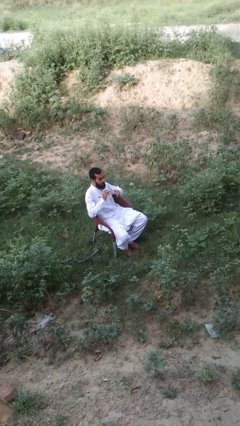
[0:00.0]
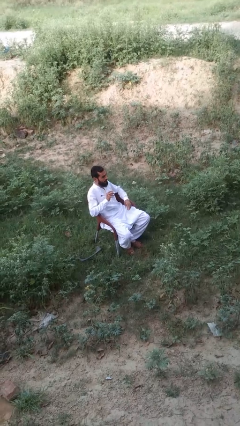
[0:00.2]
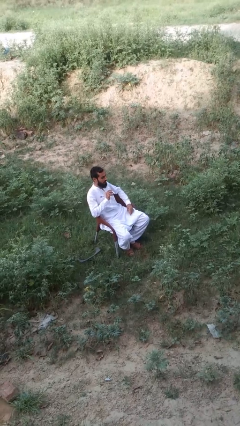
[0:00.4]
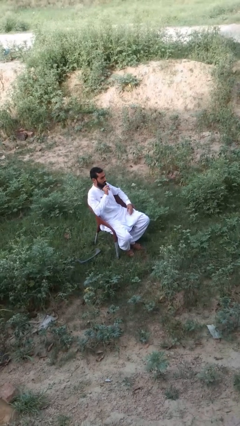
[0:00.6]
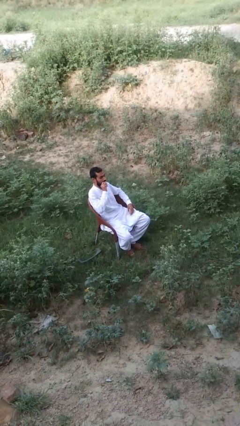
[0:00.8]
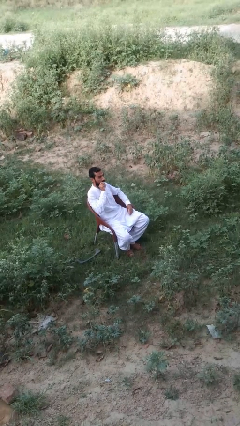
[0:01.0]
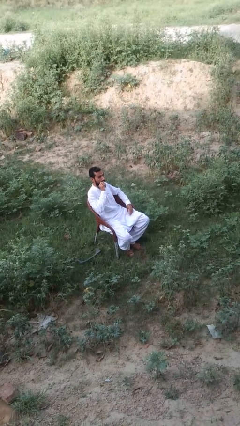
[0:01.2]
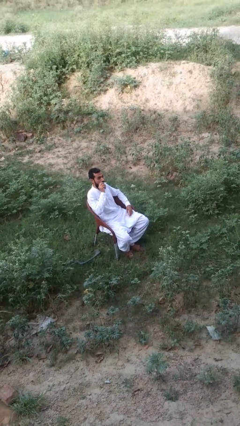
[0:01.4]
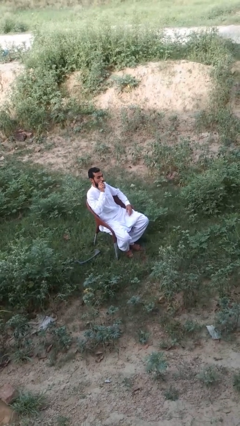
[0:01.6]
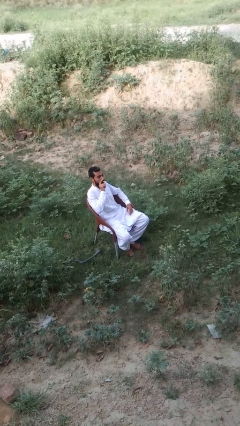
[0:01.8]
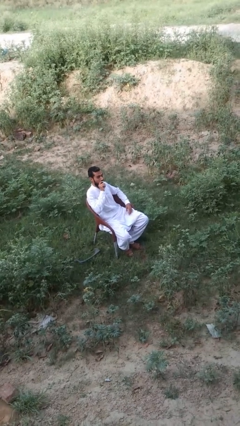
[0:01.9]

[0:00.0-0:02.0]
person vapes

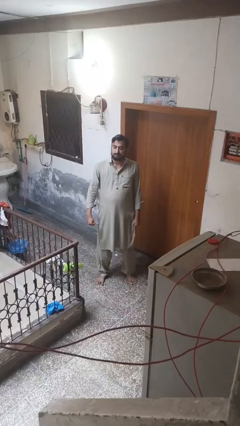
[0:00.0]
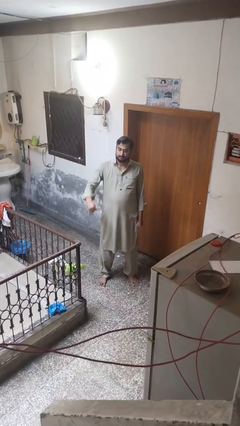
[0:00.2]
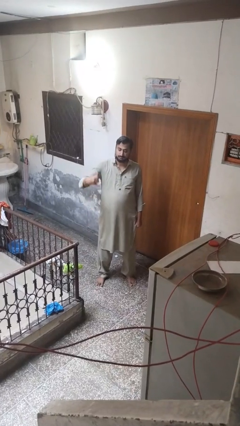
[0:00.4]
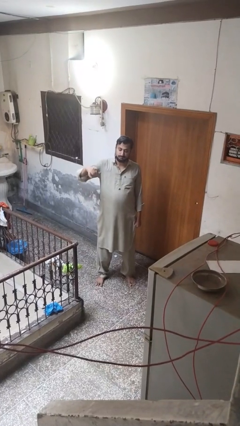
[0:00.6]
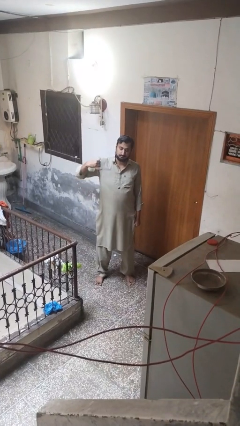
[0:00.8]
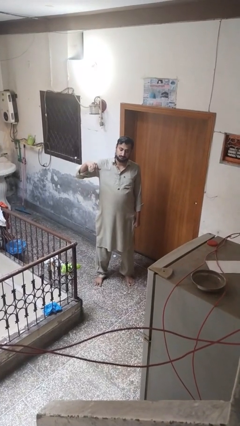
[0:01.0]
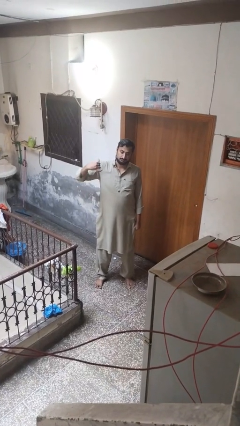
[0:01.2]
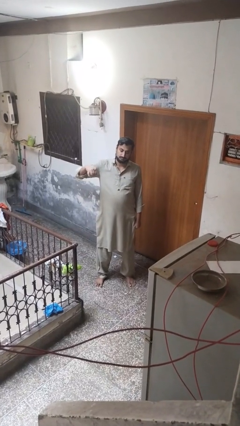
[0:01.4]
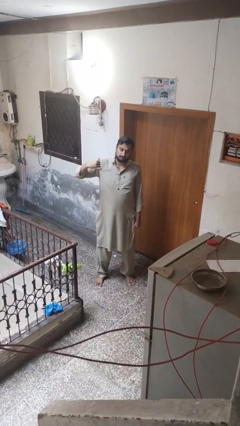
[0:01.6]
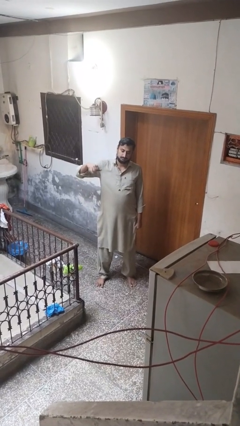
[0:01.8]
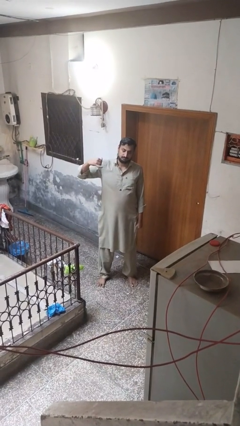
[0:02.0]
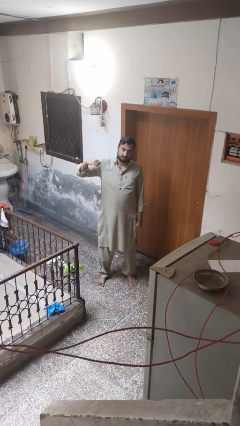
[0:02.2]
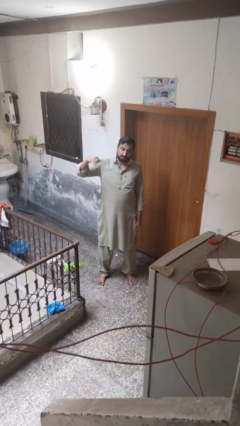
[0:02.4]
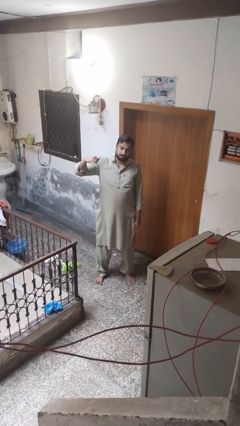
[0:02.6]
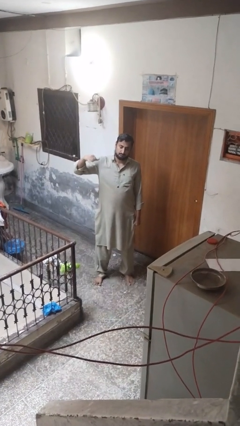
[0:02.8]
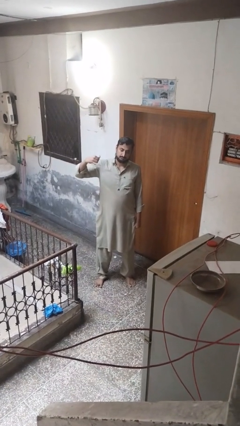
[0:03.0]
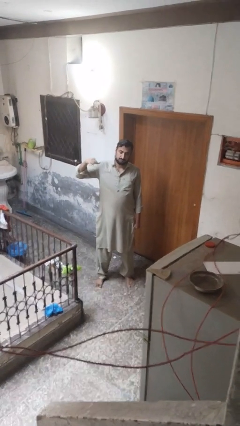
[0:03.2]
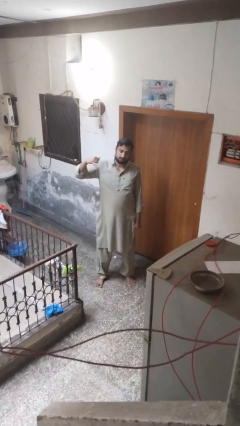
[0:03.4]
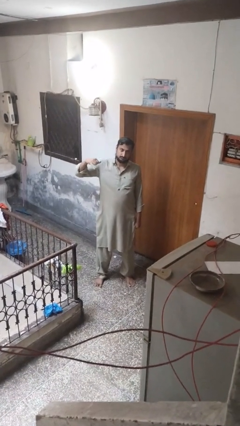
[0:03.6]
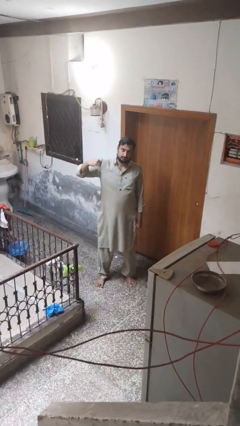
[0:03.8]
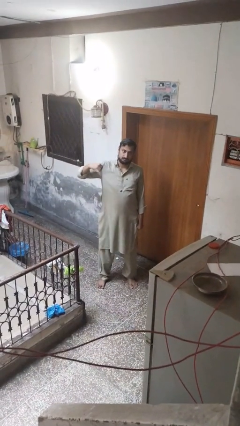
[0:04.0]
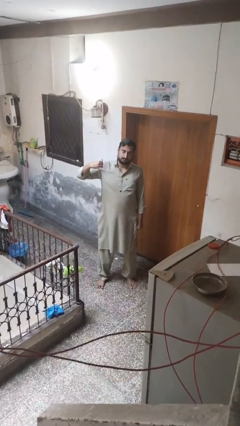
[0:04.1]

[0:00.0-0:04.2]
person gestures hang loose

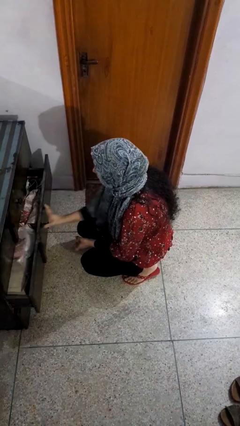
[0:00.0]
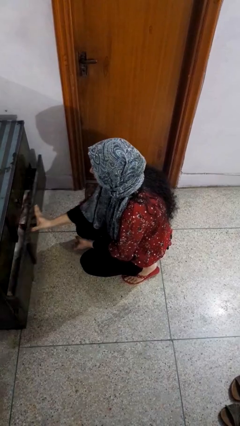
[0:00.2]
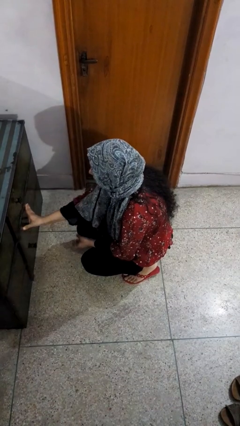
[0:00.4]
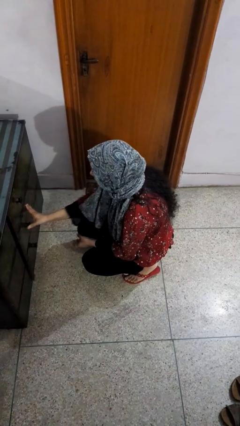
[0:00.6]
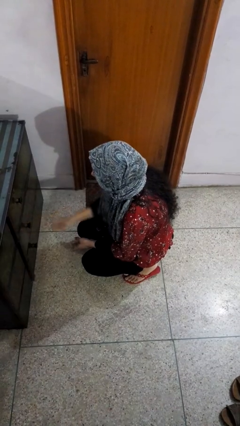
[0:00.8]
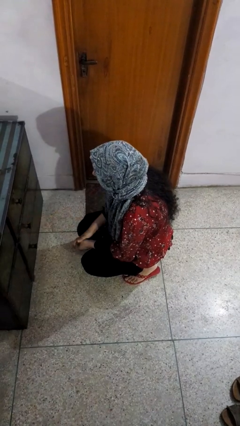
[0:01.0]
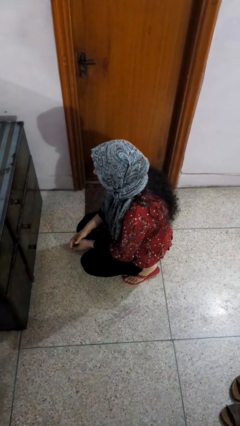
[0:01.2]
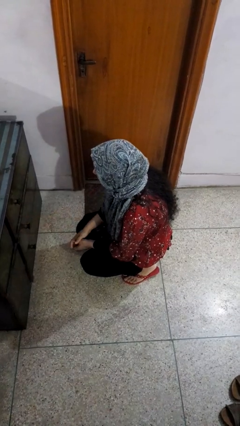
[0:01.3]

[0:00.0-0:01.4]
person closes dresser drawer

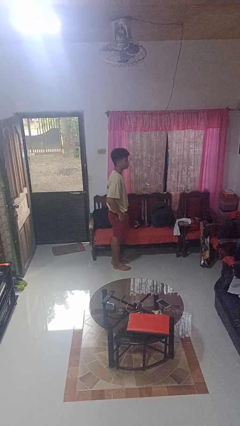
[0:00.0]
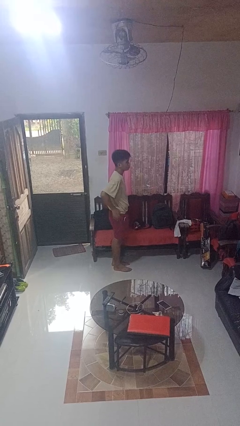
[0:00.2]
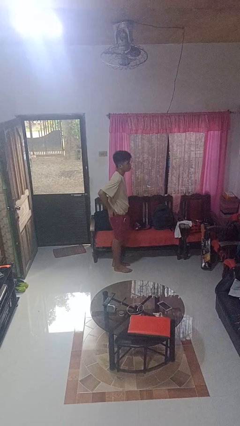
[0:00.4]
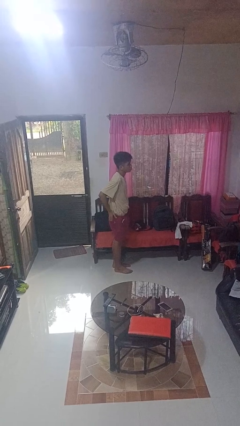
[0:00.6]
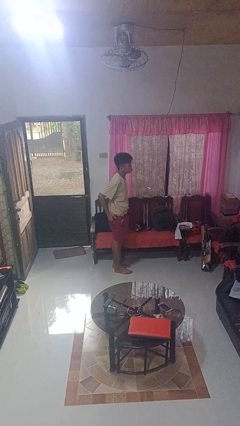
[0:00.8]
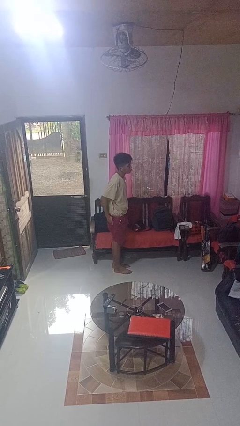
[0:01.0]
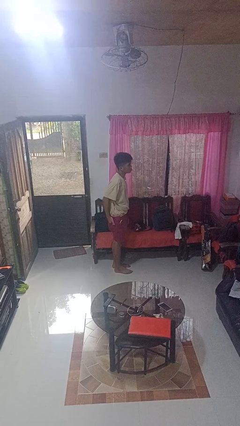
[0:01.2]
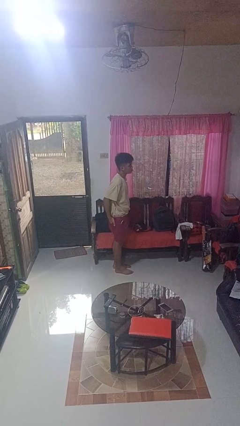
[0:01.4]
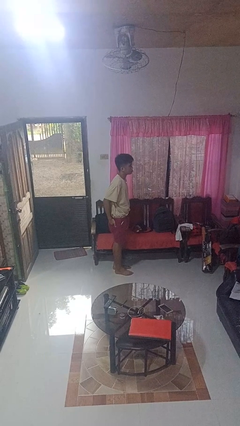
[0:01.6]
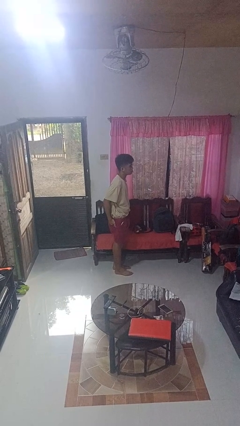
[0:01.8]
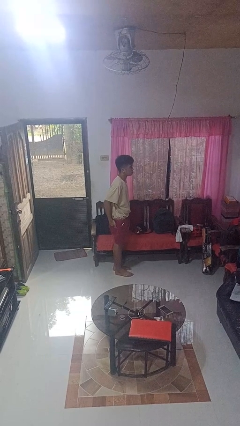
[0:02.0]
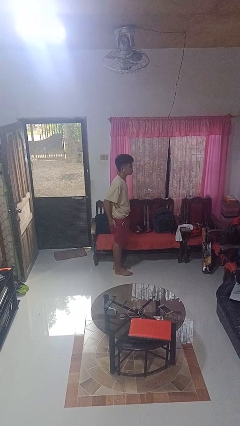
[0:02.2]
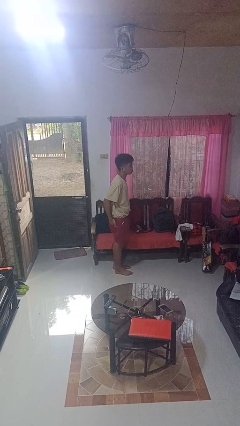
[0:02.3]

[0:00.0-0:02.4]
person puts hands in back pockets

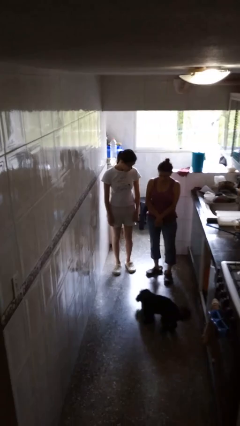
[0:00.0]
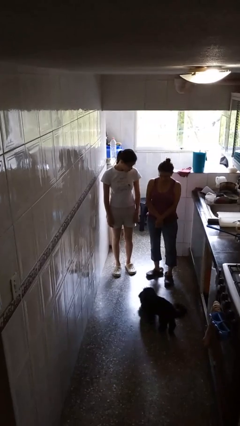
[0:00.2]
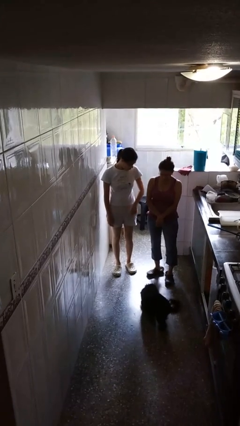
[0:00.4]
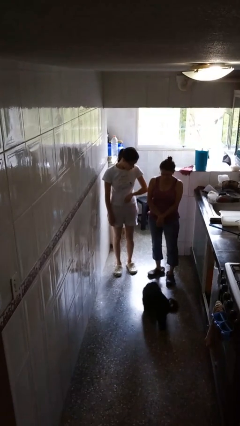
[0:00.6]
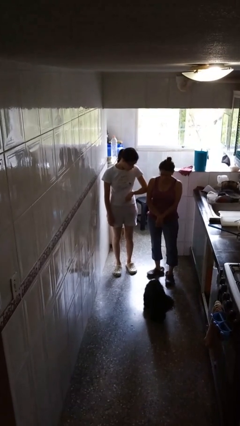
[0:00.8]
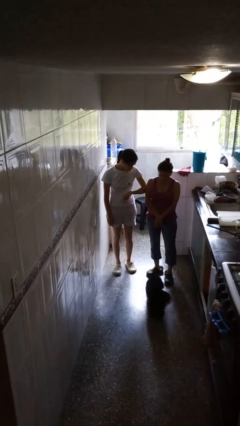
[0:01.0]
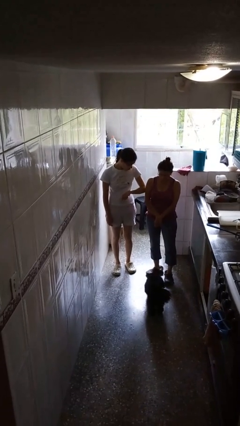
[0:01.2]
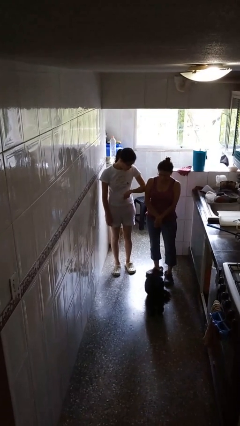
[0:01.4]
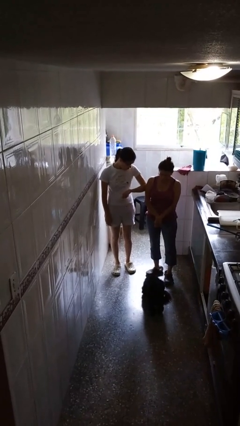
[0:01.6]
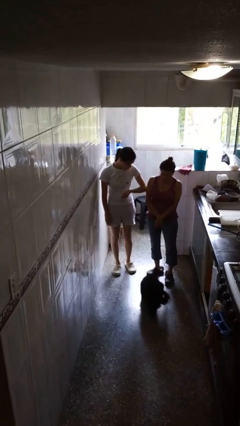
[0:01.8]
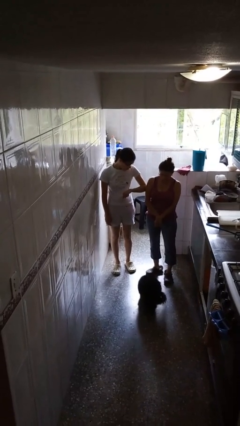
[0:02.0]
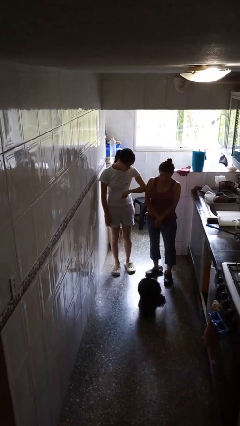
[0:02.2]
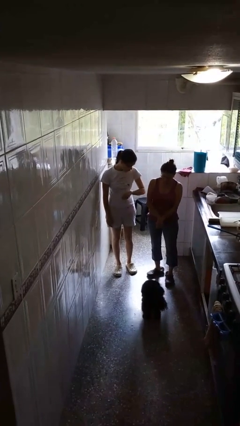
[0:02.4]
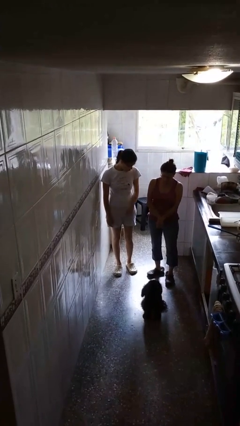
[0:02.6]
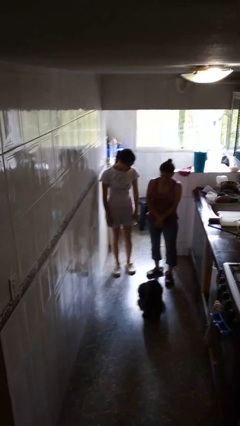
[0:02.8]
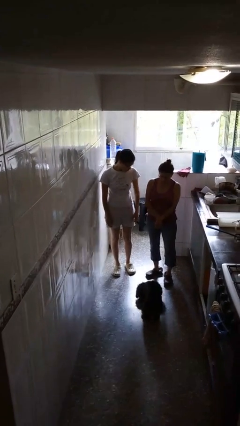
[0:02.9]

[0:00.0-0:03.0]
person nudges person with elbow

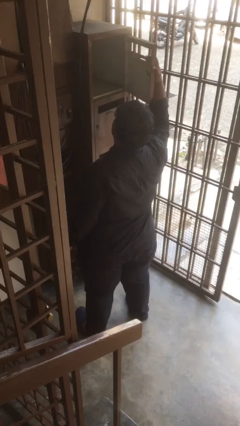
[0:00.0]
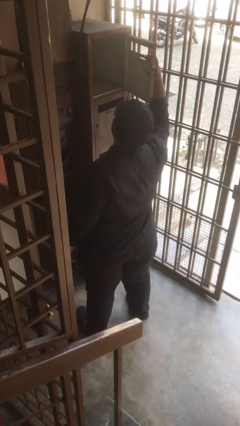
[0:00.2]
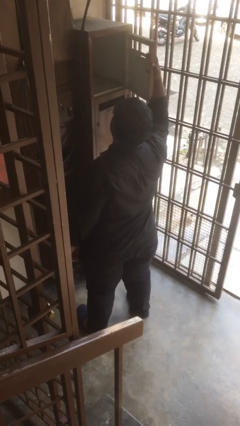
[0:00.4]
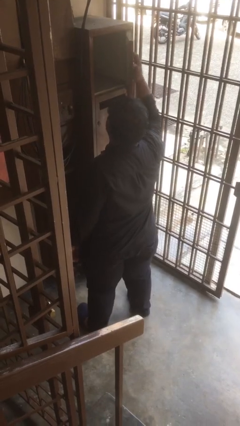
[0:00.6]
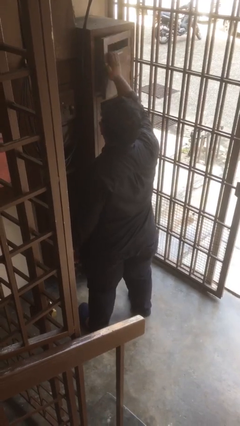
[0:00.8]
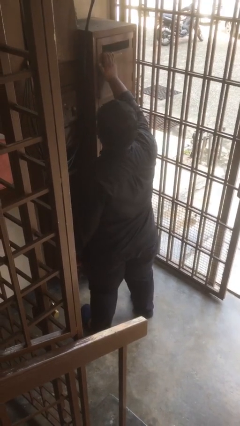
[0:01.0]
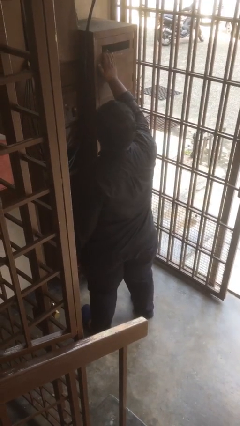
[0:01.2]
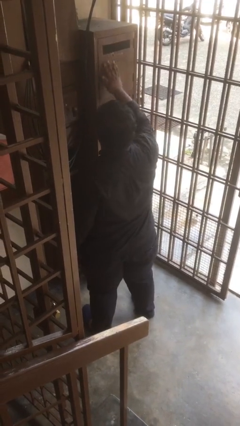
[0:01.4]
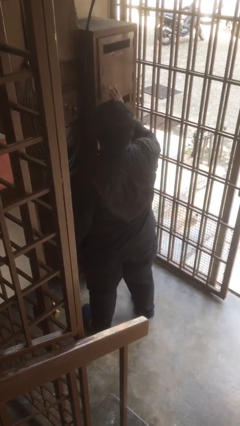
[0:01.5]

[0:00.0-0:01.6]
person closes mailbox

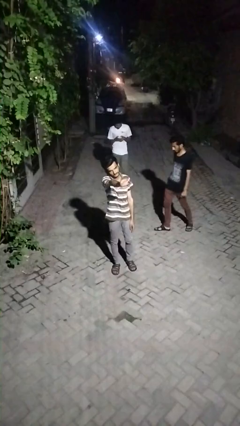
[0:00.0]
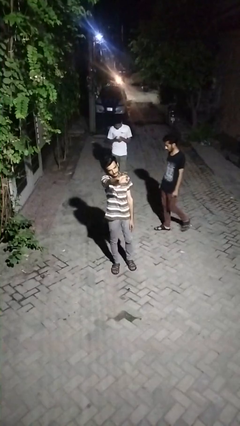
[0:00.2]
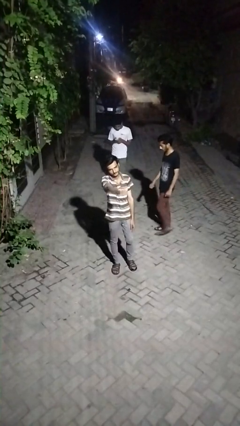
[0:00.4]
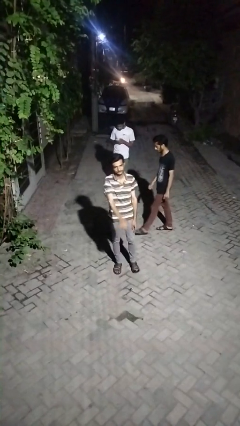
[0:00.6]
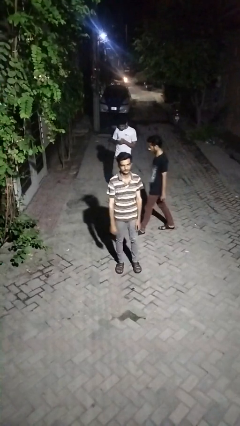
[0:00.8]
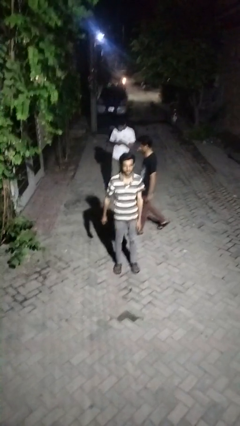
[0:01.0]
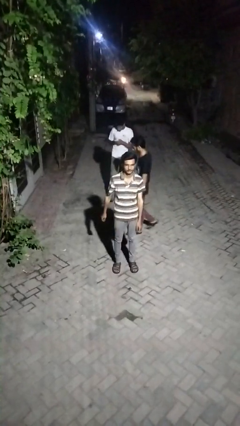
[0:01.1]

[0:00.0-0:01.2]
person waves at person

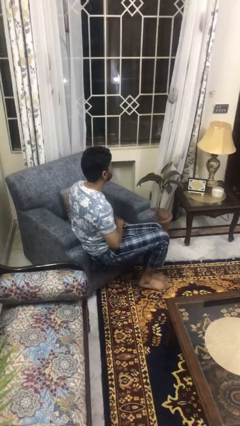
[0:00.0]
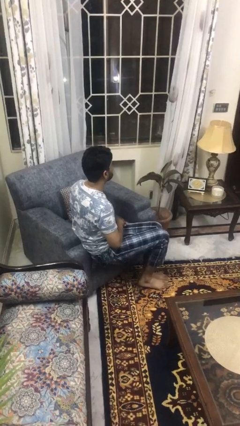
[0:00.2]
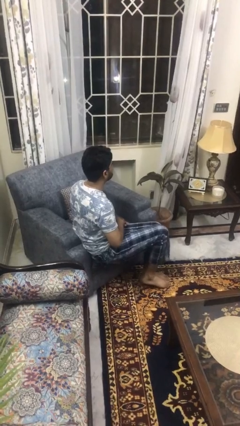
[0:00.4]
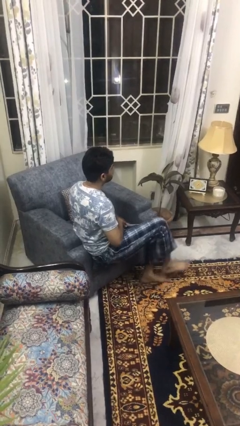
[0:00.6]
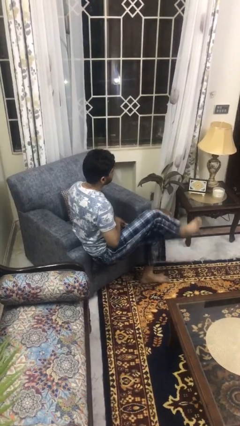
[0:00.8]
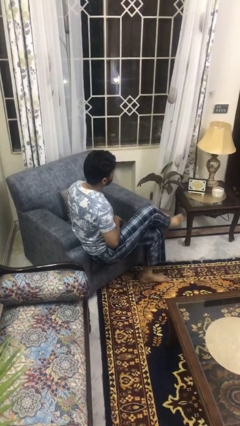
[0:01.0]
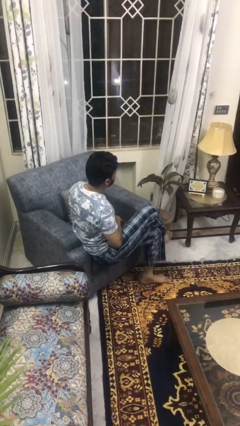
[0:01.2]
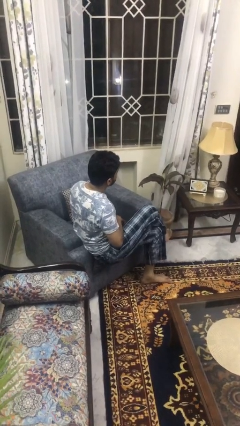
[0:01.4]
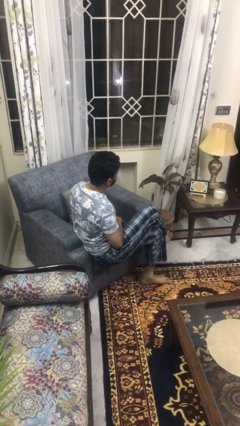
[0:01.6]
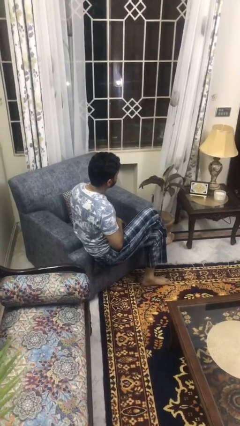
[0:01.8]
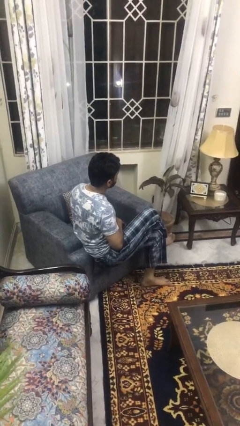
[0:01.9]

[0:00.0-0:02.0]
person crosses legs
